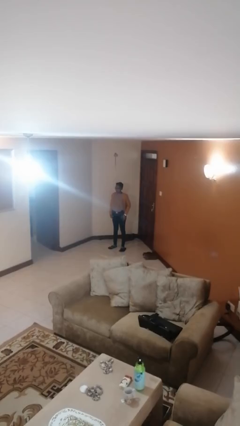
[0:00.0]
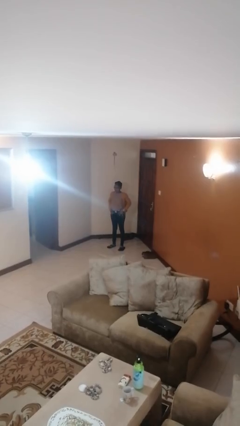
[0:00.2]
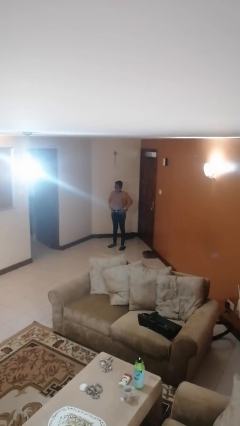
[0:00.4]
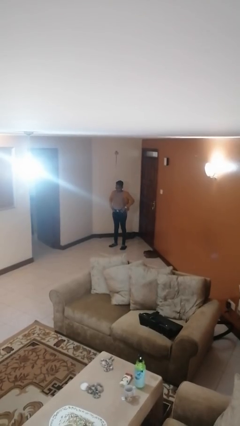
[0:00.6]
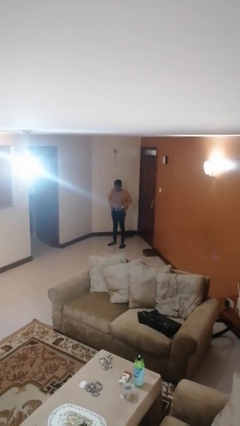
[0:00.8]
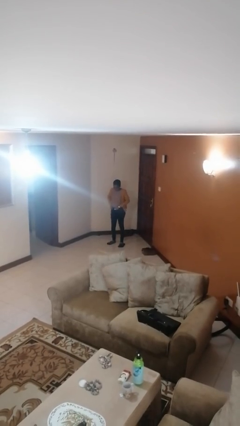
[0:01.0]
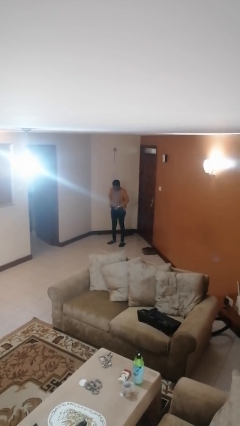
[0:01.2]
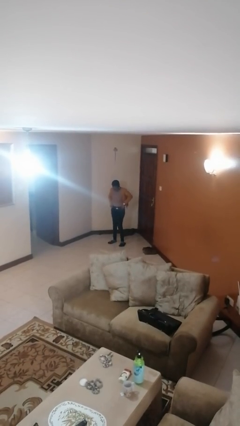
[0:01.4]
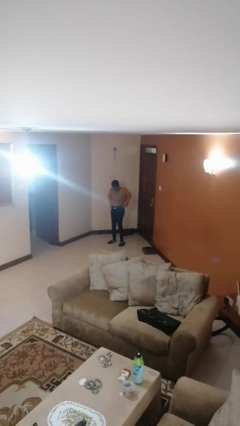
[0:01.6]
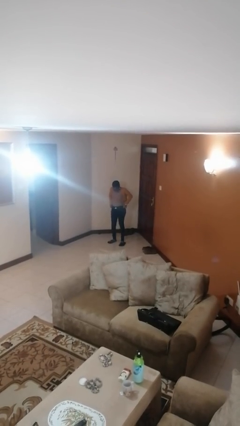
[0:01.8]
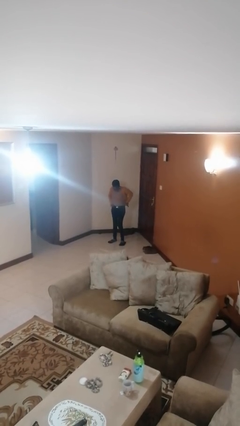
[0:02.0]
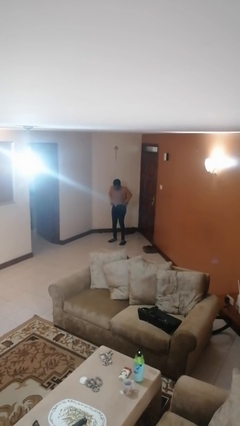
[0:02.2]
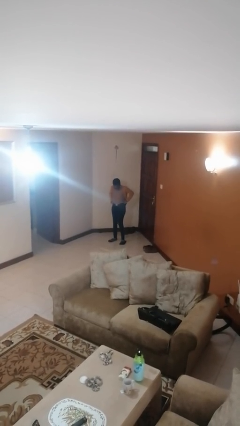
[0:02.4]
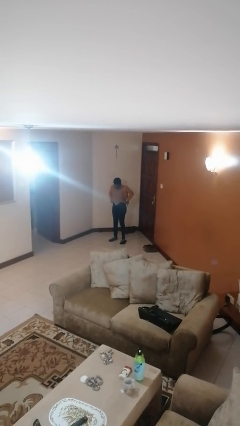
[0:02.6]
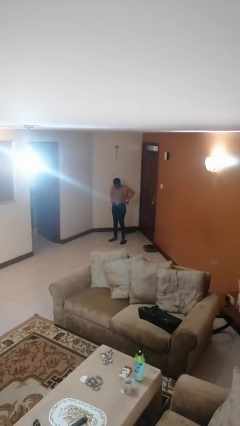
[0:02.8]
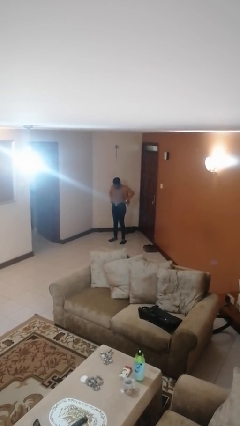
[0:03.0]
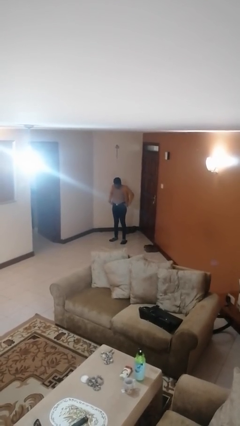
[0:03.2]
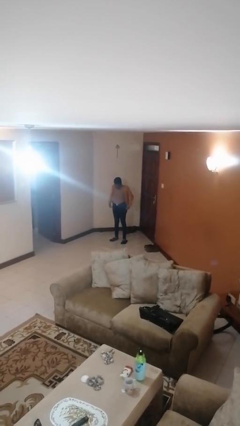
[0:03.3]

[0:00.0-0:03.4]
person hikes up pants

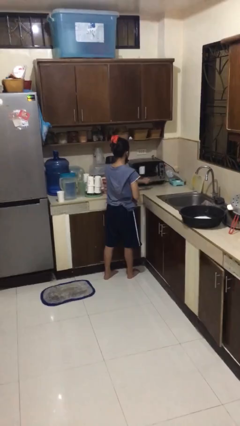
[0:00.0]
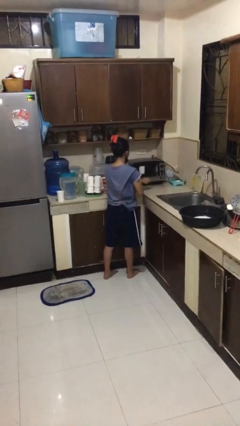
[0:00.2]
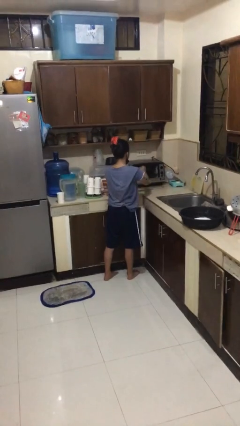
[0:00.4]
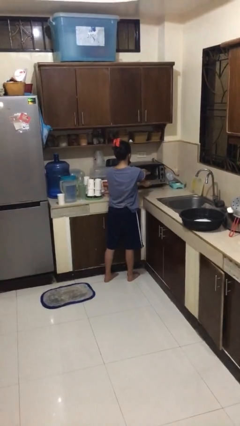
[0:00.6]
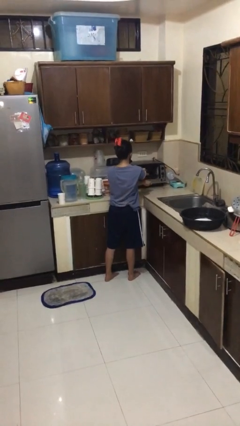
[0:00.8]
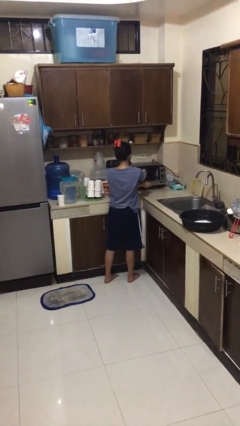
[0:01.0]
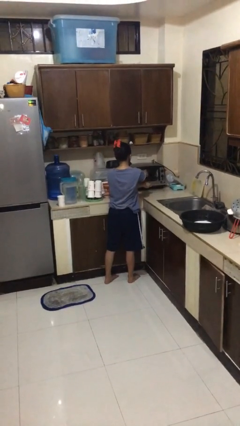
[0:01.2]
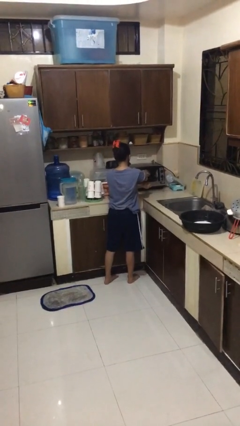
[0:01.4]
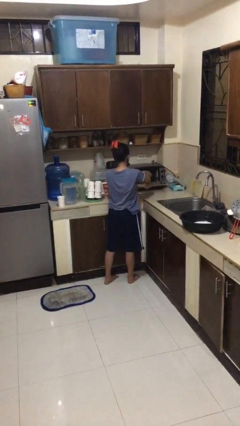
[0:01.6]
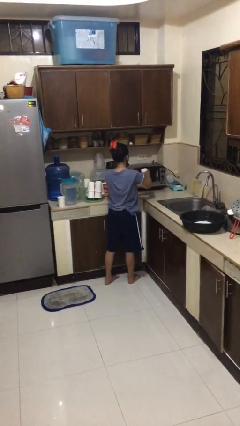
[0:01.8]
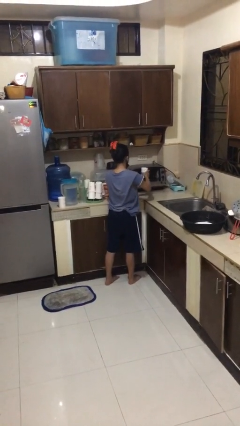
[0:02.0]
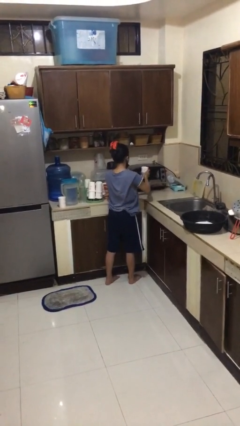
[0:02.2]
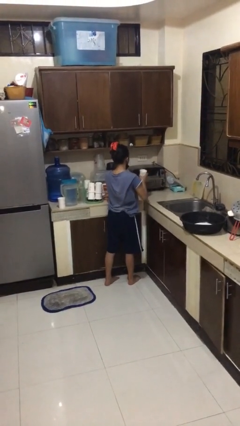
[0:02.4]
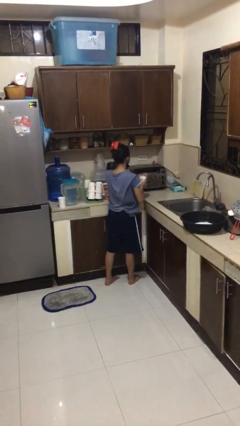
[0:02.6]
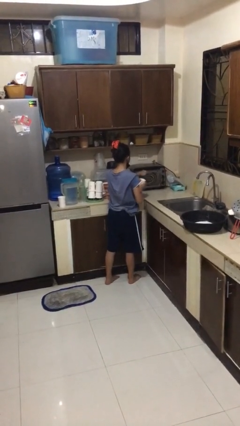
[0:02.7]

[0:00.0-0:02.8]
person takes object from microwave

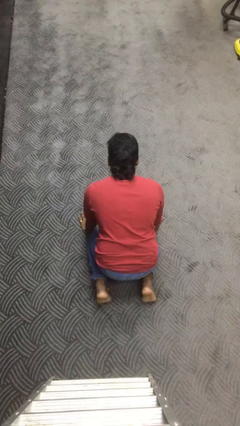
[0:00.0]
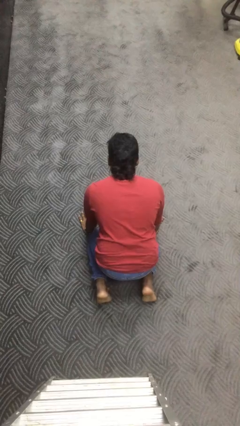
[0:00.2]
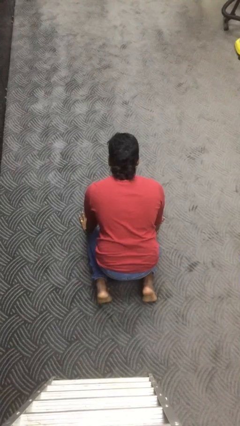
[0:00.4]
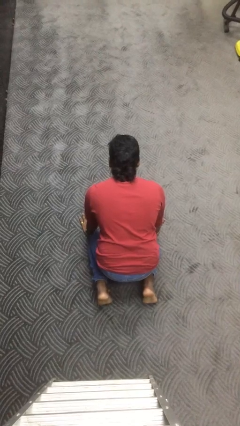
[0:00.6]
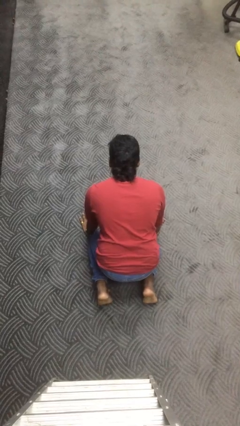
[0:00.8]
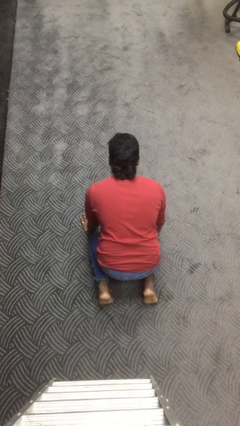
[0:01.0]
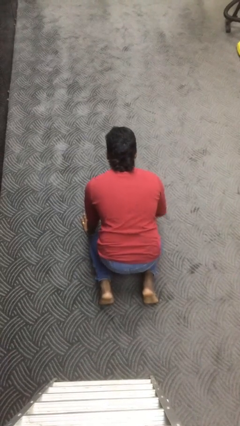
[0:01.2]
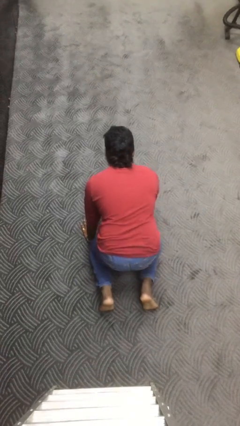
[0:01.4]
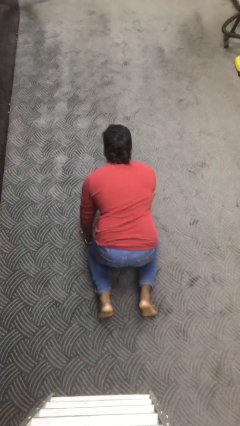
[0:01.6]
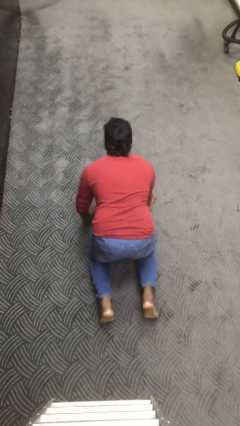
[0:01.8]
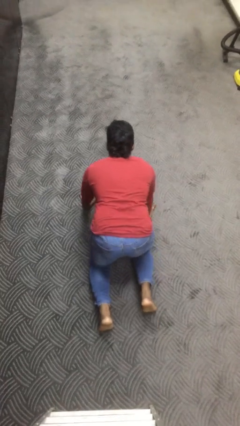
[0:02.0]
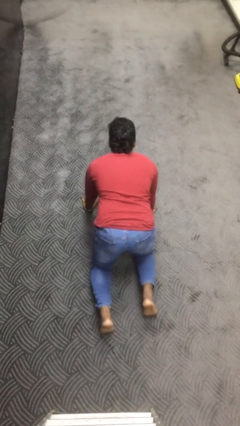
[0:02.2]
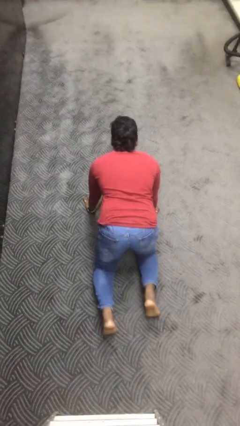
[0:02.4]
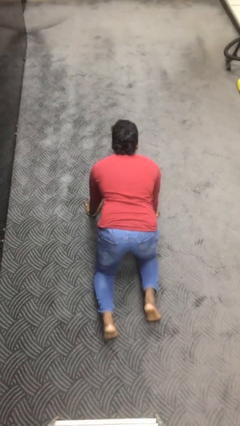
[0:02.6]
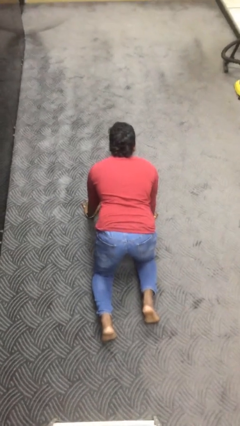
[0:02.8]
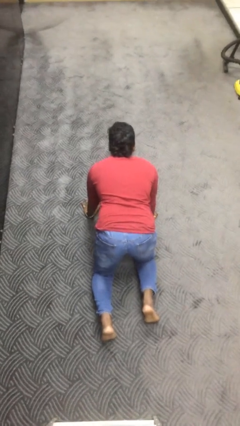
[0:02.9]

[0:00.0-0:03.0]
person crawls

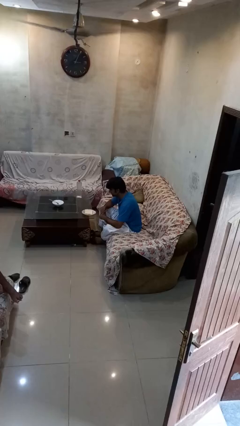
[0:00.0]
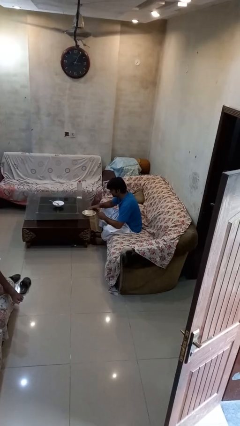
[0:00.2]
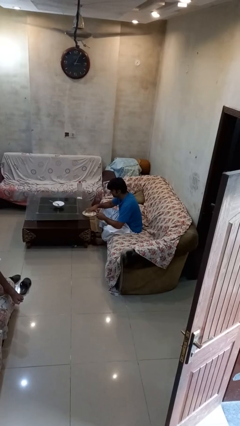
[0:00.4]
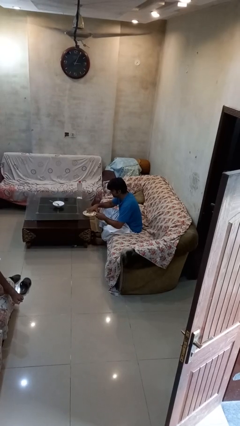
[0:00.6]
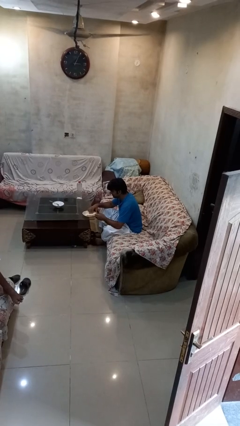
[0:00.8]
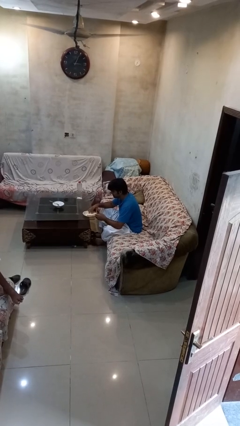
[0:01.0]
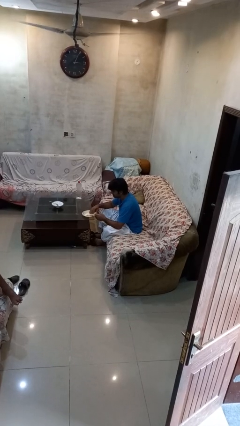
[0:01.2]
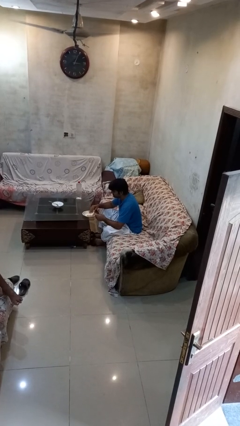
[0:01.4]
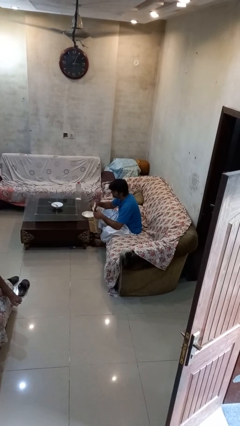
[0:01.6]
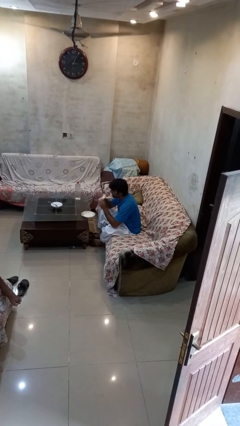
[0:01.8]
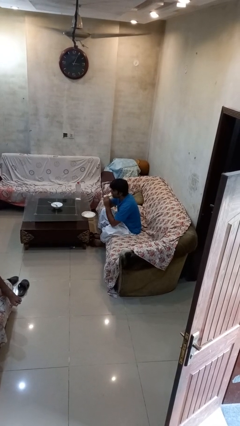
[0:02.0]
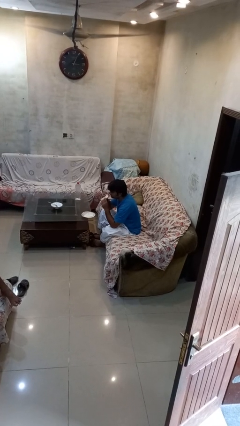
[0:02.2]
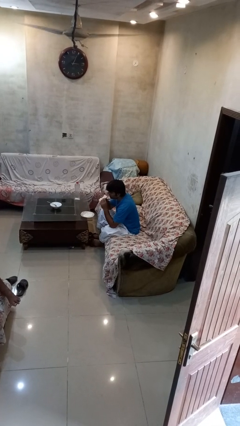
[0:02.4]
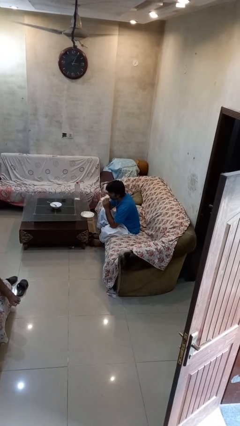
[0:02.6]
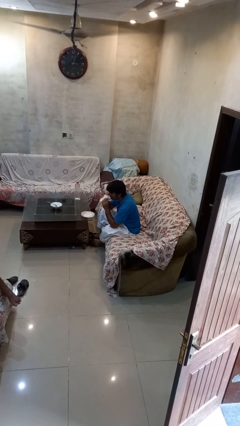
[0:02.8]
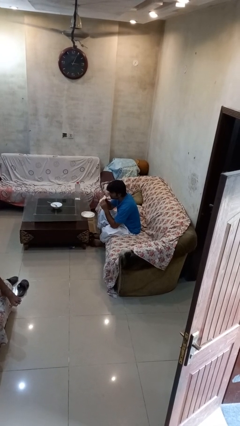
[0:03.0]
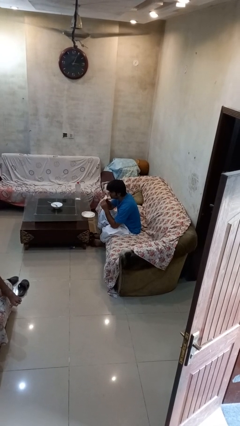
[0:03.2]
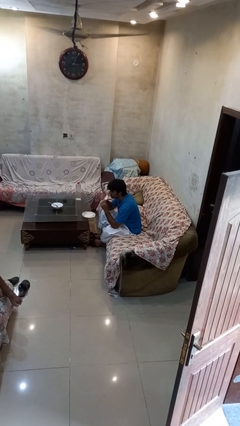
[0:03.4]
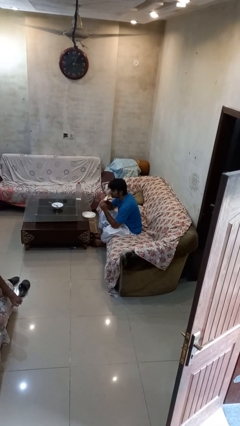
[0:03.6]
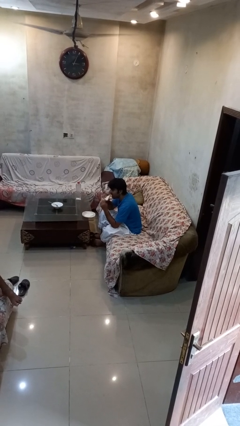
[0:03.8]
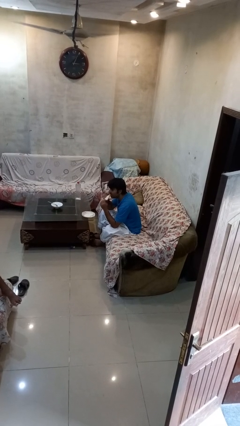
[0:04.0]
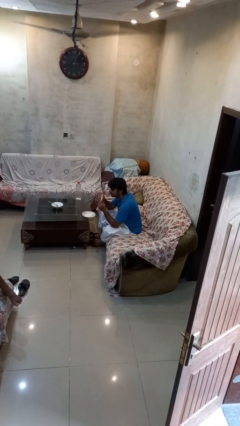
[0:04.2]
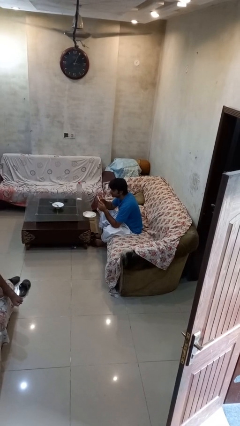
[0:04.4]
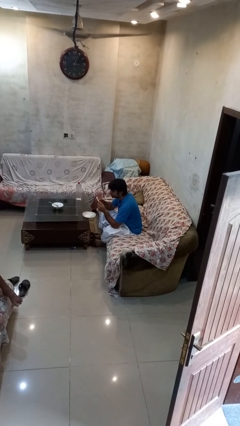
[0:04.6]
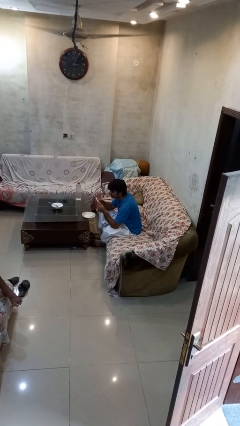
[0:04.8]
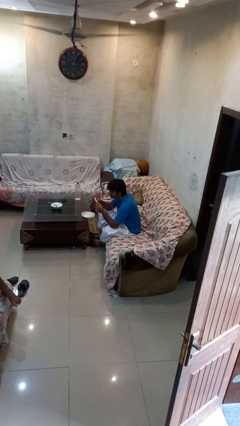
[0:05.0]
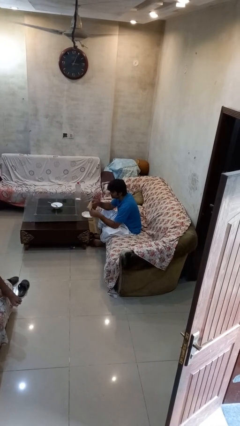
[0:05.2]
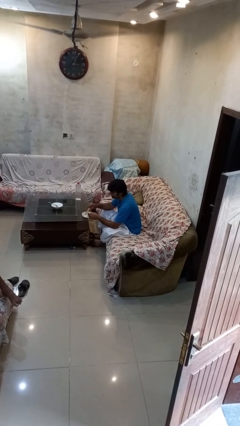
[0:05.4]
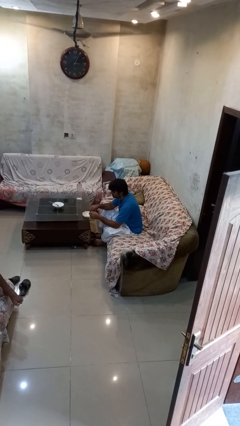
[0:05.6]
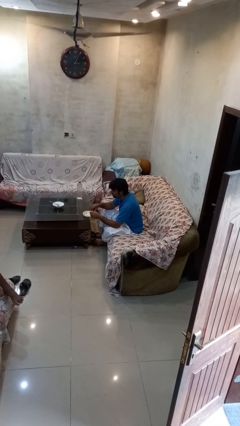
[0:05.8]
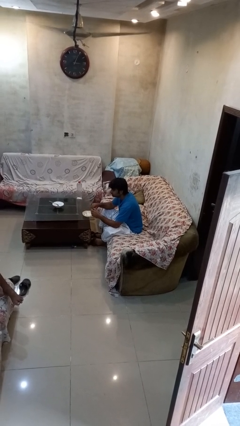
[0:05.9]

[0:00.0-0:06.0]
person eats with hands

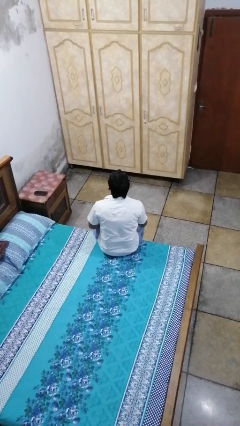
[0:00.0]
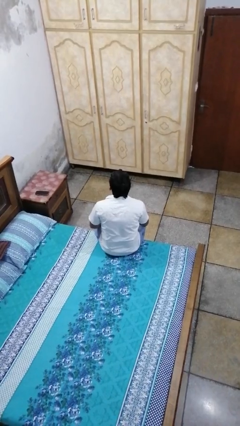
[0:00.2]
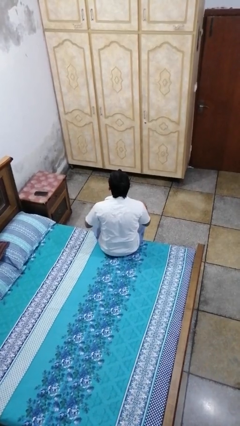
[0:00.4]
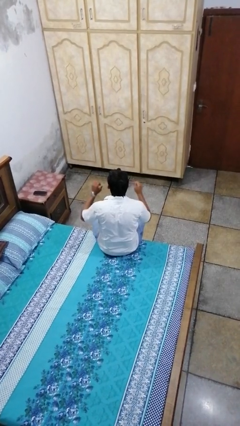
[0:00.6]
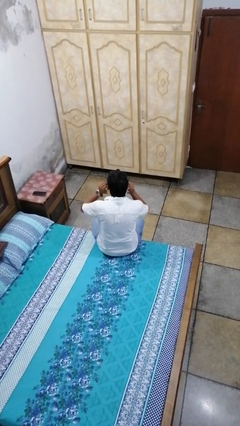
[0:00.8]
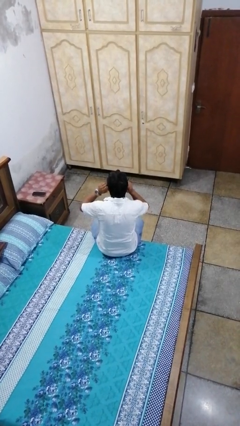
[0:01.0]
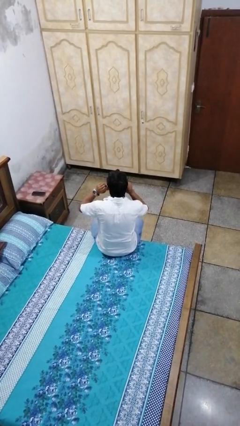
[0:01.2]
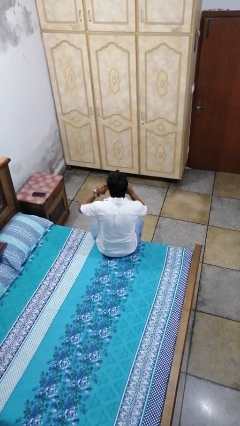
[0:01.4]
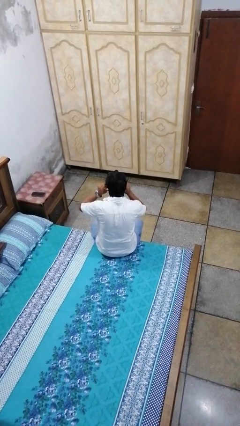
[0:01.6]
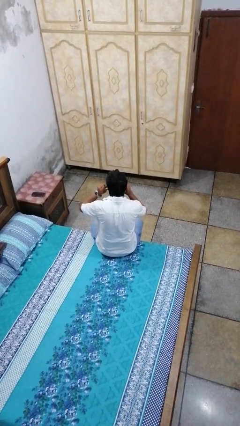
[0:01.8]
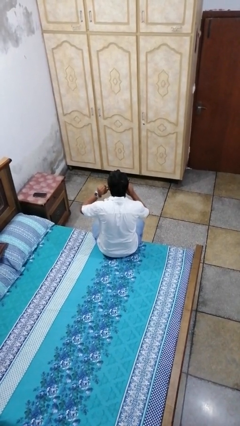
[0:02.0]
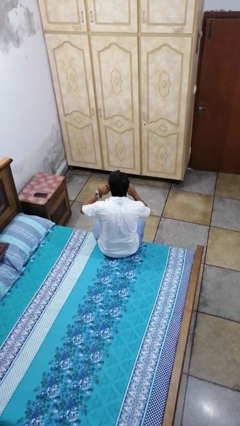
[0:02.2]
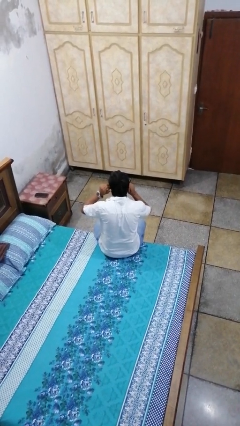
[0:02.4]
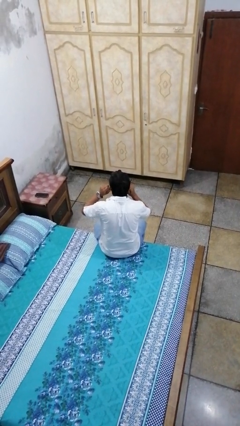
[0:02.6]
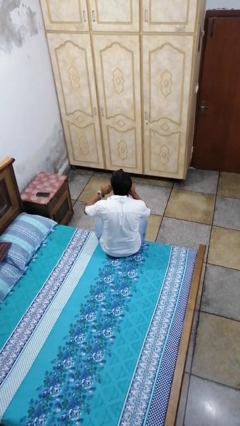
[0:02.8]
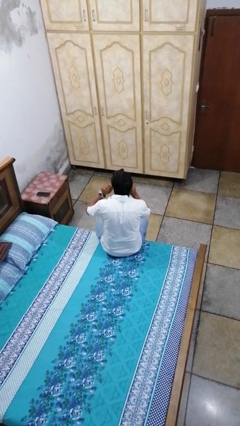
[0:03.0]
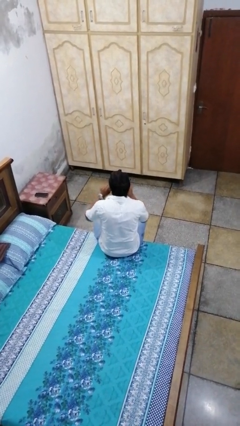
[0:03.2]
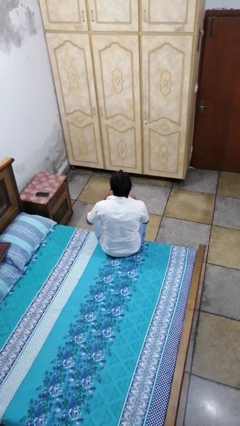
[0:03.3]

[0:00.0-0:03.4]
person touches earlobe
